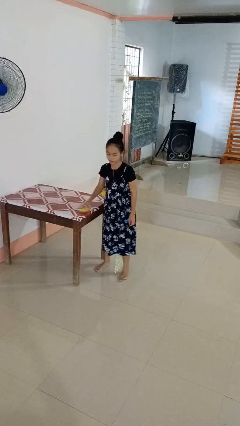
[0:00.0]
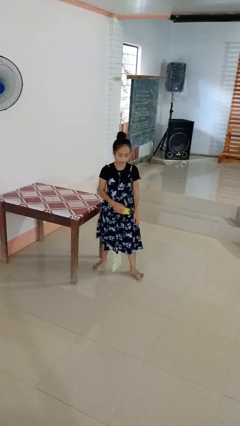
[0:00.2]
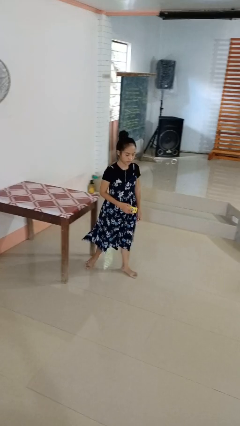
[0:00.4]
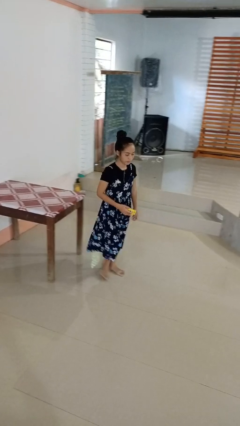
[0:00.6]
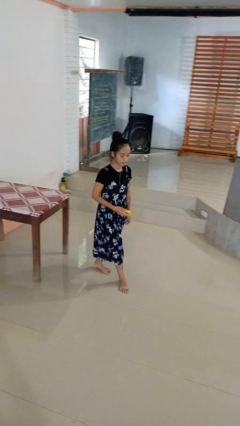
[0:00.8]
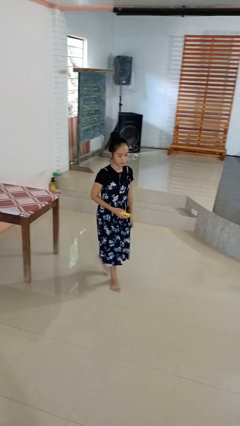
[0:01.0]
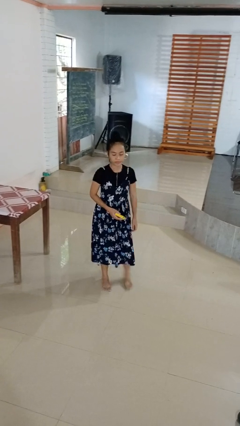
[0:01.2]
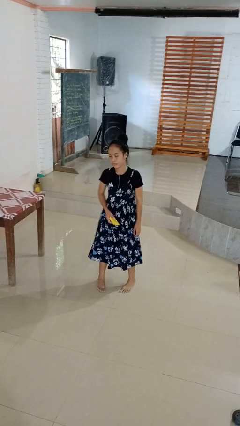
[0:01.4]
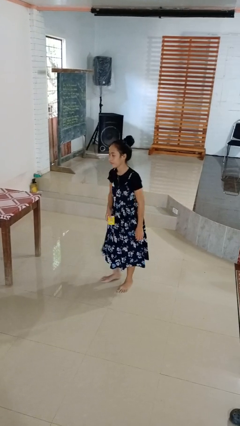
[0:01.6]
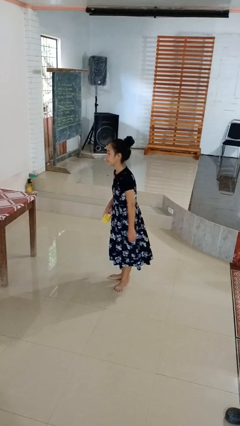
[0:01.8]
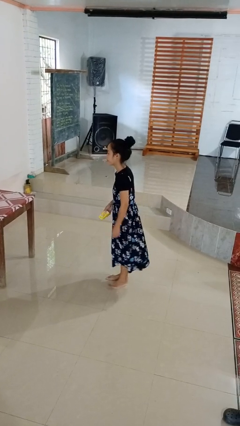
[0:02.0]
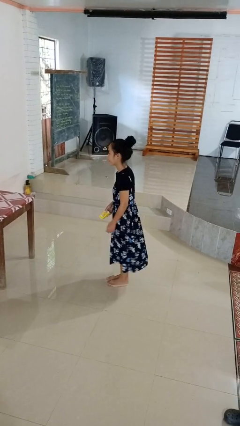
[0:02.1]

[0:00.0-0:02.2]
person picks up object from table

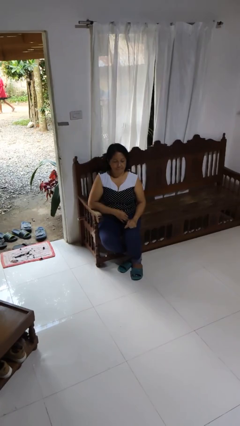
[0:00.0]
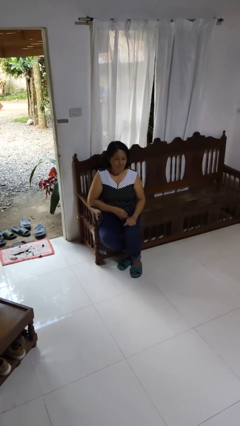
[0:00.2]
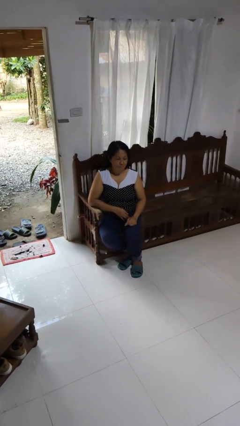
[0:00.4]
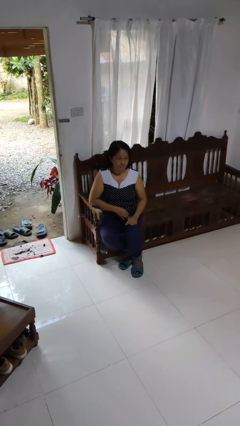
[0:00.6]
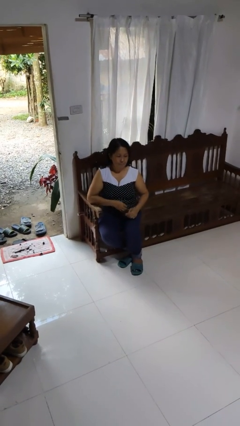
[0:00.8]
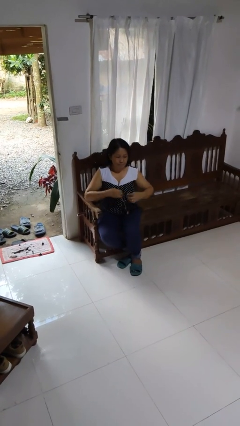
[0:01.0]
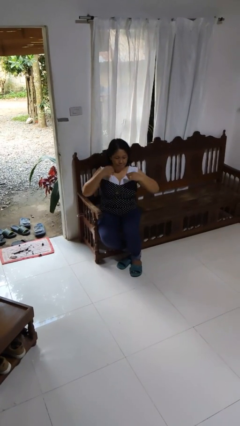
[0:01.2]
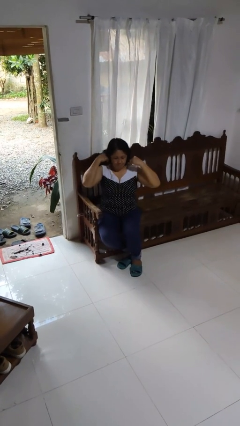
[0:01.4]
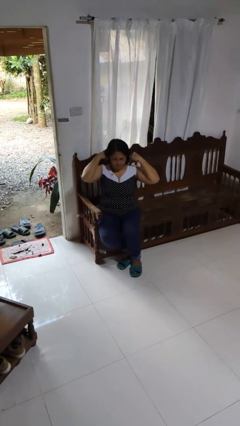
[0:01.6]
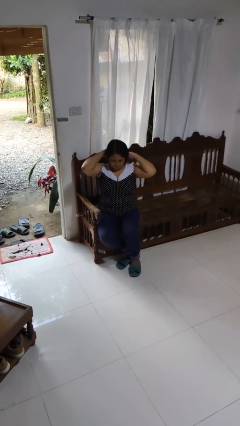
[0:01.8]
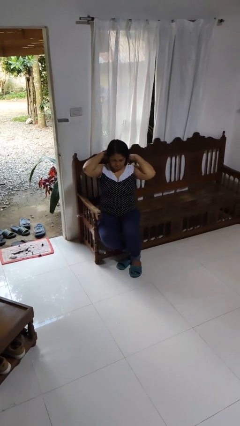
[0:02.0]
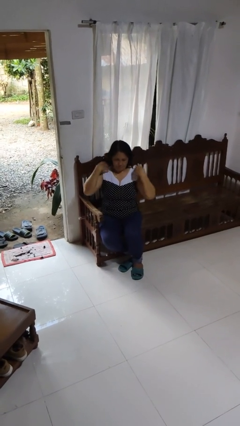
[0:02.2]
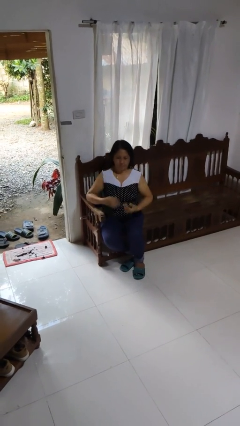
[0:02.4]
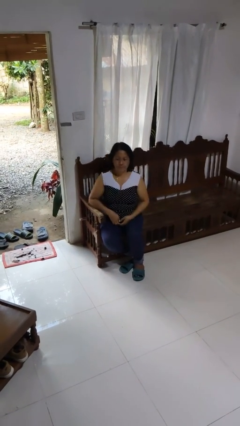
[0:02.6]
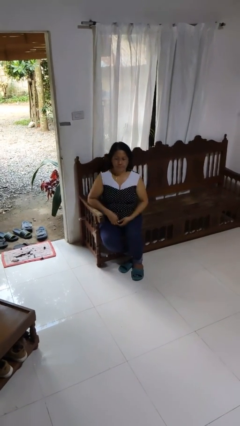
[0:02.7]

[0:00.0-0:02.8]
person puts on necklace

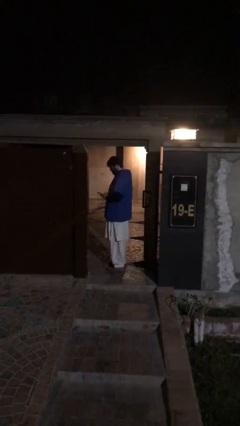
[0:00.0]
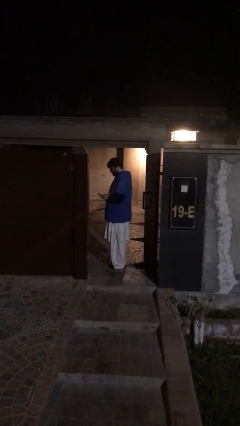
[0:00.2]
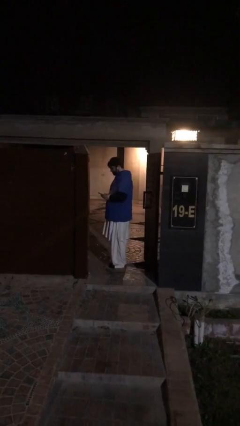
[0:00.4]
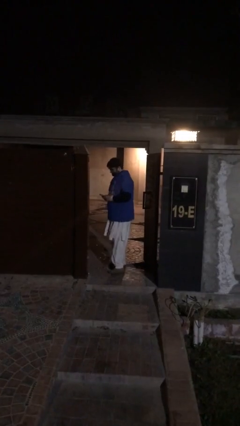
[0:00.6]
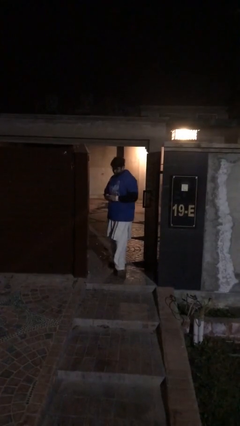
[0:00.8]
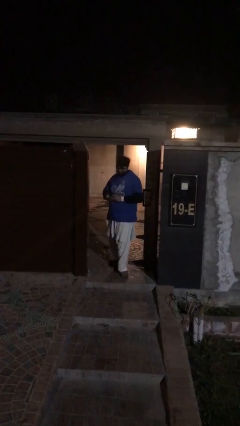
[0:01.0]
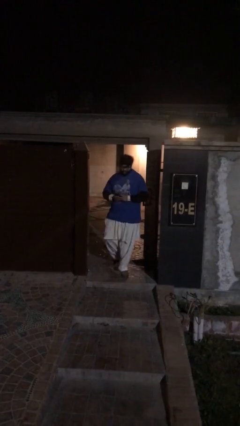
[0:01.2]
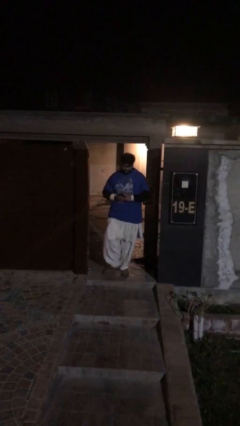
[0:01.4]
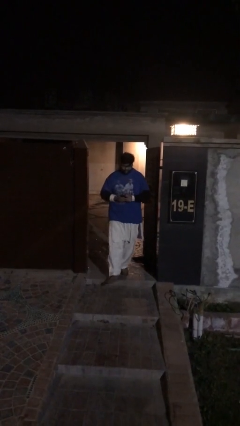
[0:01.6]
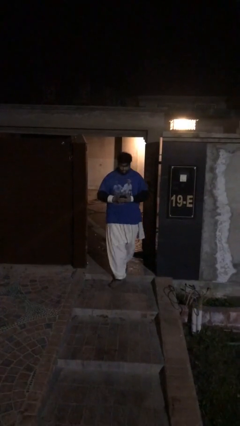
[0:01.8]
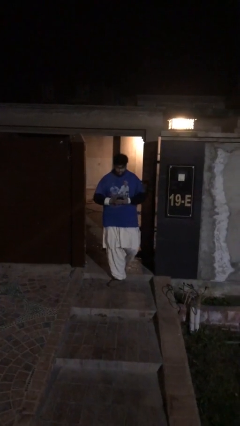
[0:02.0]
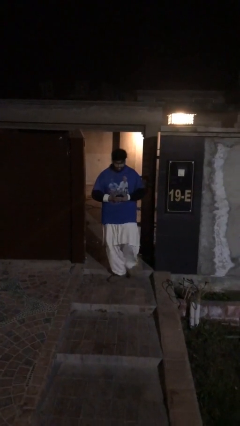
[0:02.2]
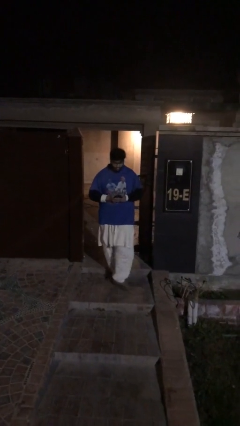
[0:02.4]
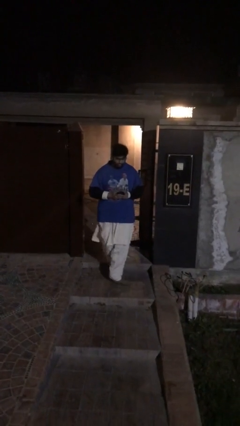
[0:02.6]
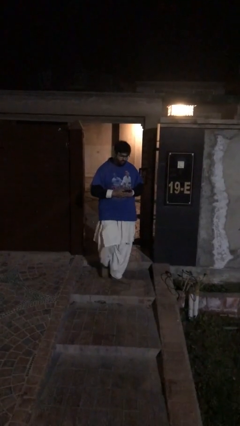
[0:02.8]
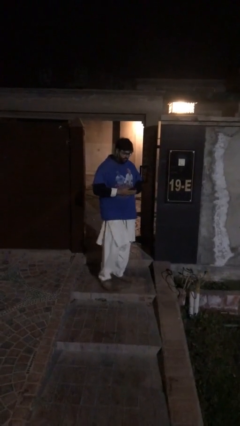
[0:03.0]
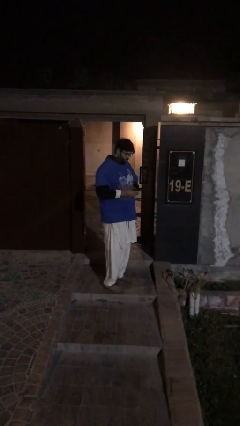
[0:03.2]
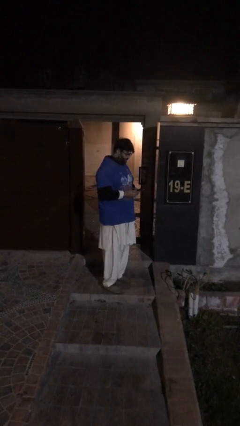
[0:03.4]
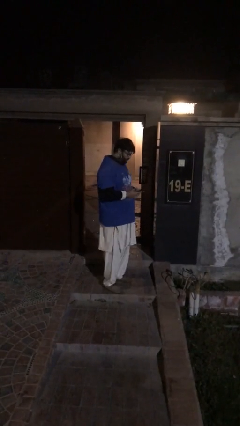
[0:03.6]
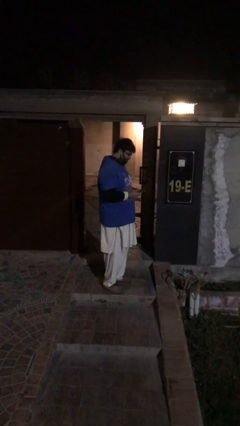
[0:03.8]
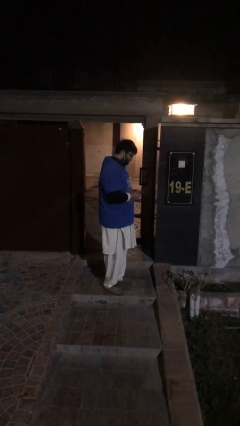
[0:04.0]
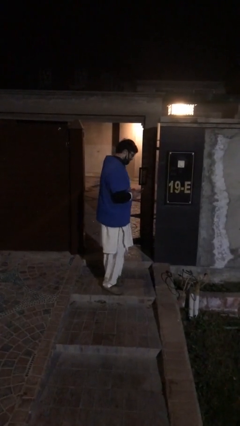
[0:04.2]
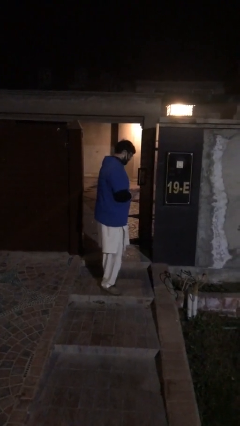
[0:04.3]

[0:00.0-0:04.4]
person enters scene through structure

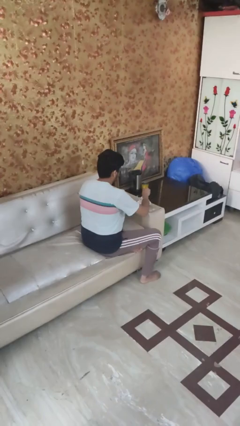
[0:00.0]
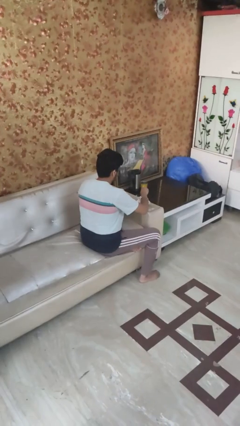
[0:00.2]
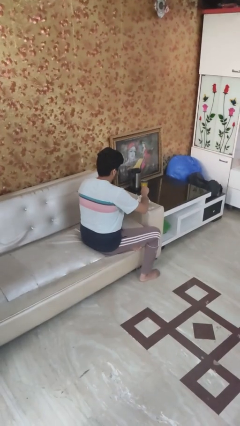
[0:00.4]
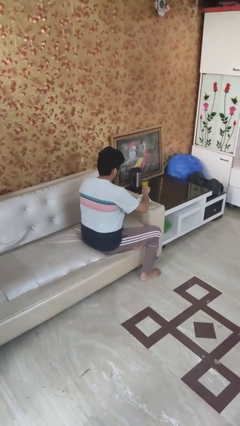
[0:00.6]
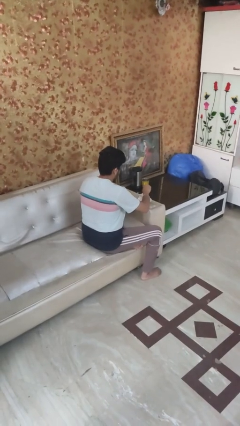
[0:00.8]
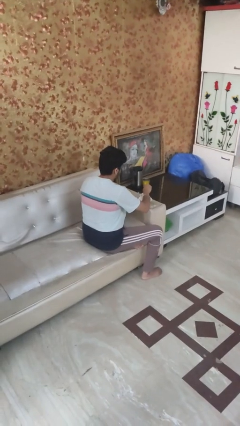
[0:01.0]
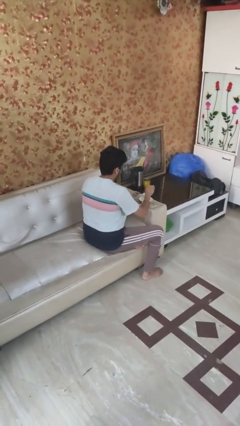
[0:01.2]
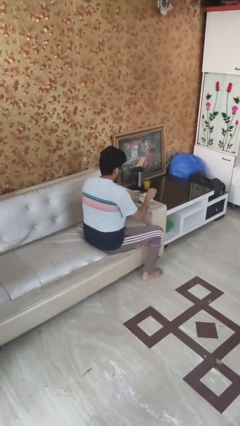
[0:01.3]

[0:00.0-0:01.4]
person stirs mug

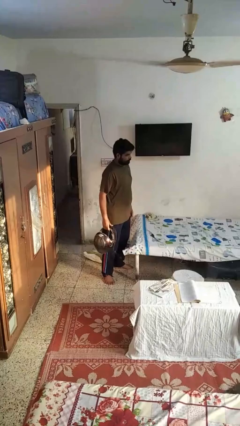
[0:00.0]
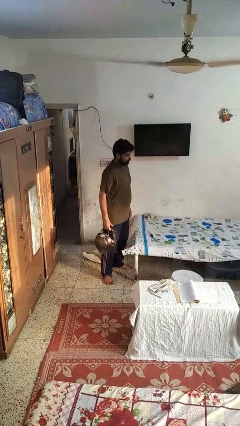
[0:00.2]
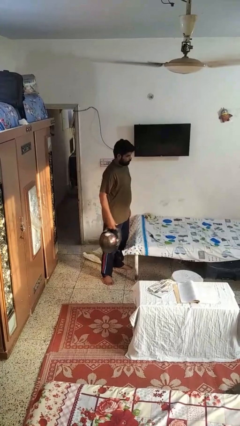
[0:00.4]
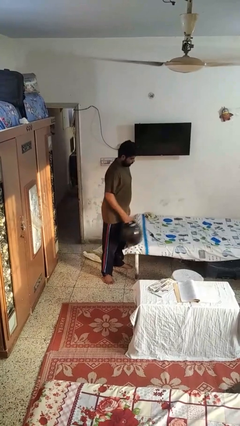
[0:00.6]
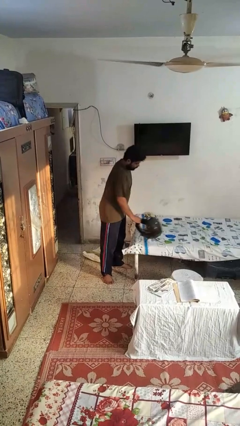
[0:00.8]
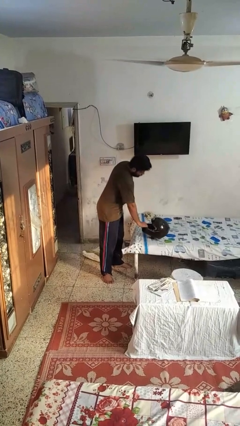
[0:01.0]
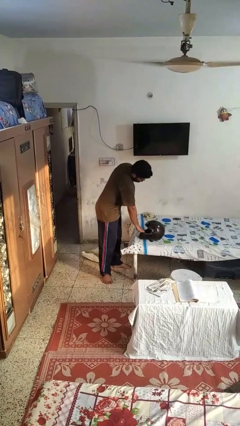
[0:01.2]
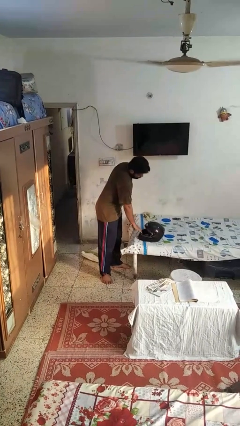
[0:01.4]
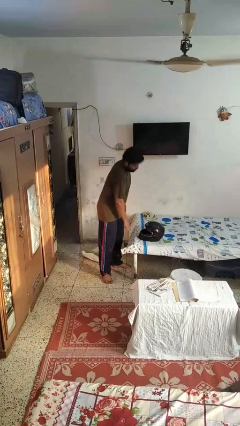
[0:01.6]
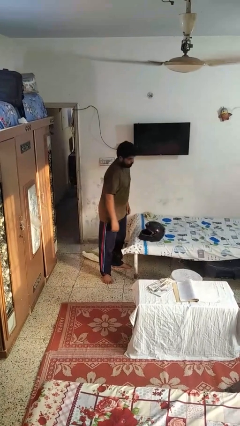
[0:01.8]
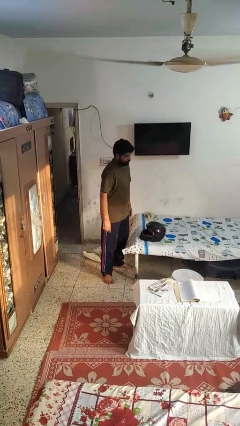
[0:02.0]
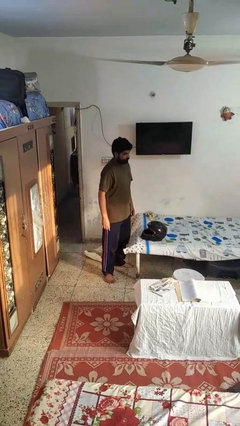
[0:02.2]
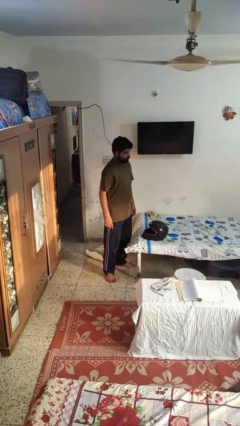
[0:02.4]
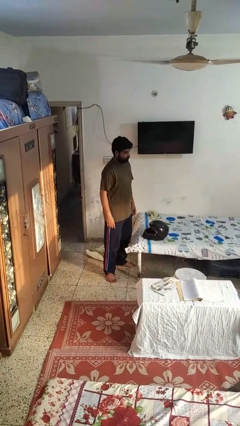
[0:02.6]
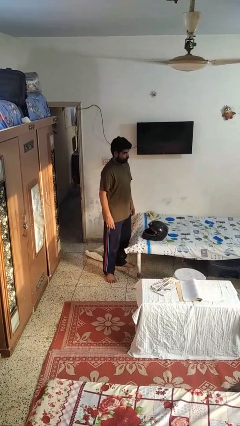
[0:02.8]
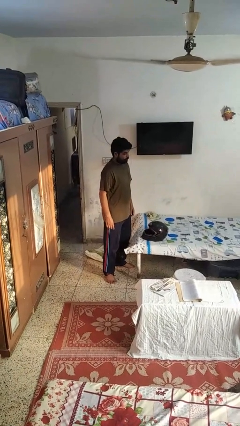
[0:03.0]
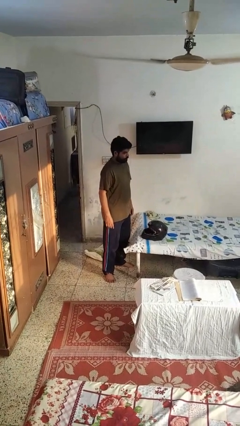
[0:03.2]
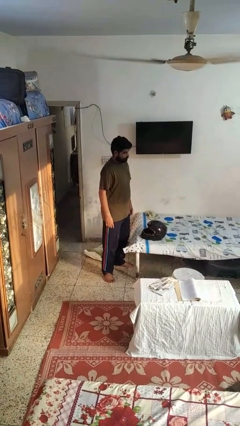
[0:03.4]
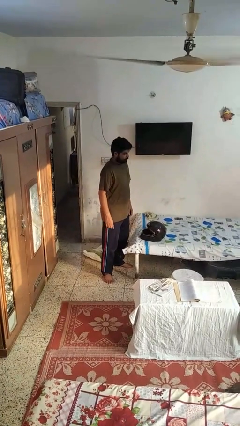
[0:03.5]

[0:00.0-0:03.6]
person puts down object on bed

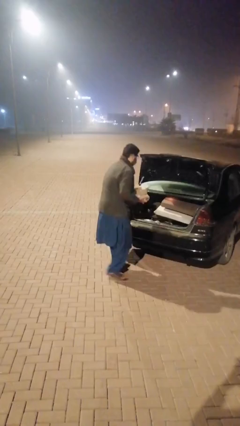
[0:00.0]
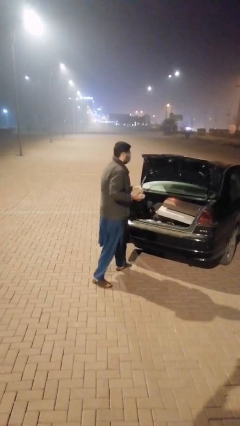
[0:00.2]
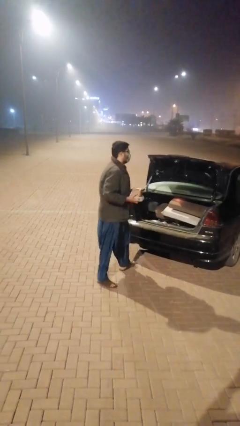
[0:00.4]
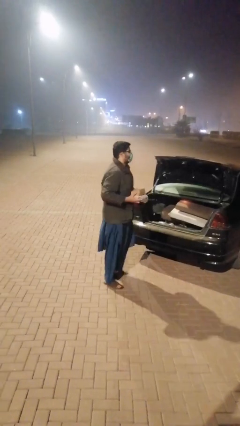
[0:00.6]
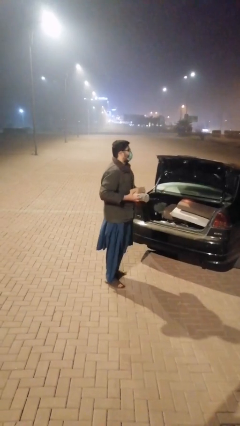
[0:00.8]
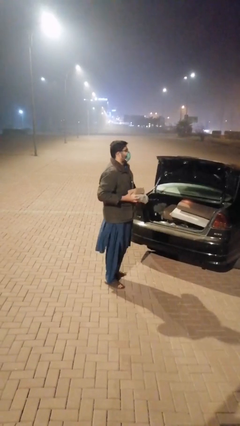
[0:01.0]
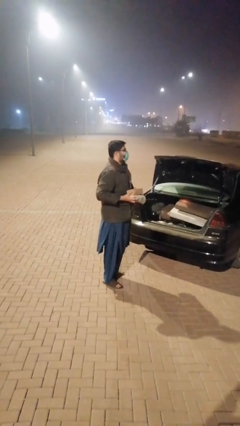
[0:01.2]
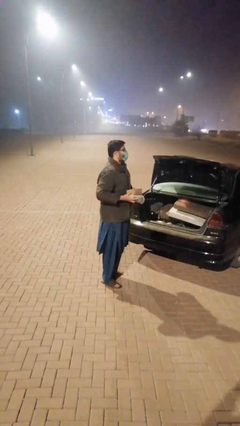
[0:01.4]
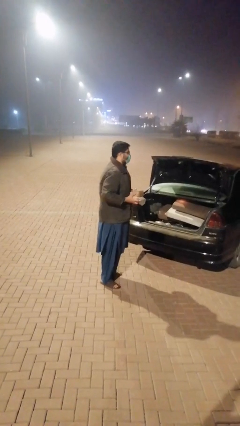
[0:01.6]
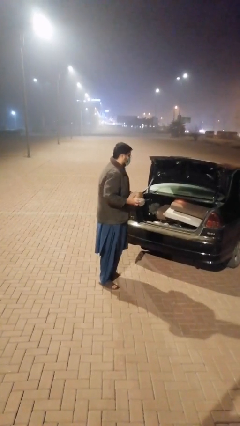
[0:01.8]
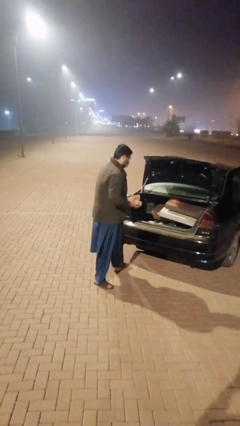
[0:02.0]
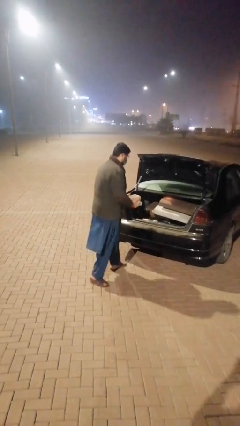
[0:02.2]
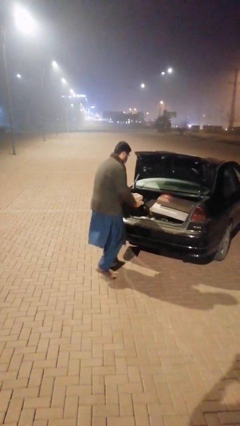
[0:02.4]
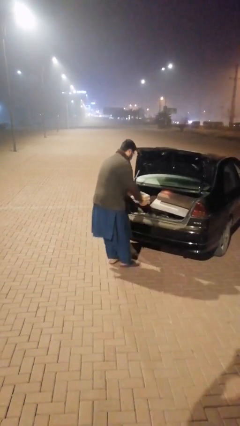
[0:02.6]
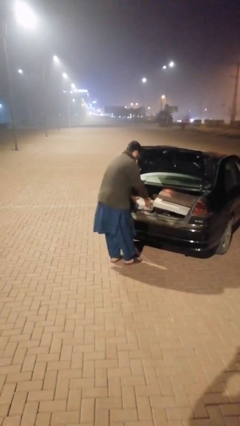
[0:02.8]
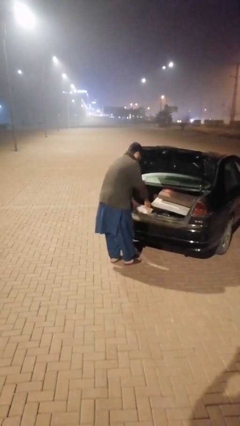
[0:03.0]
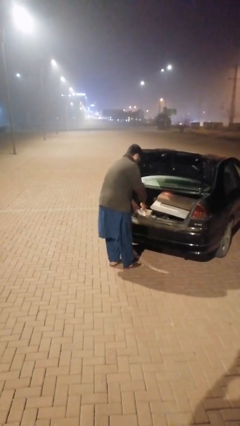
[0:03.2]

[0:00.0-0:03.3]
person unloads car
